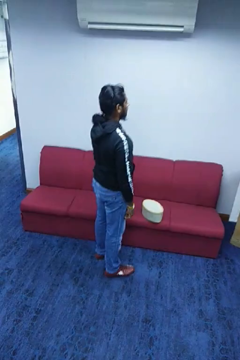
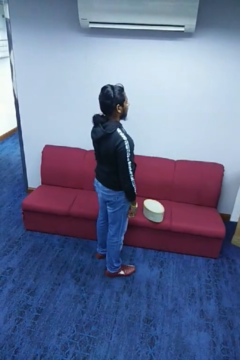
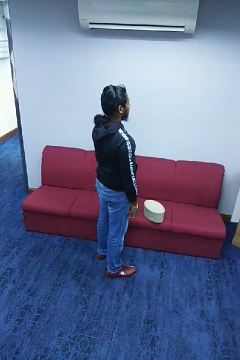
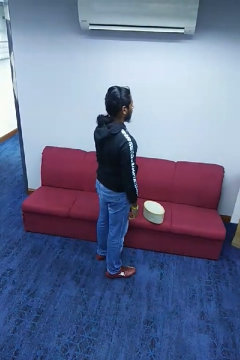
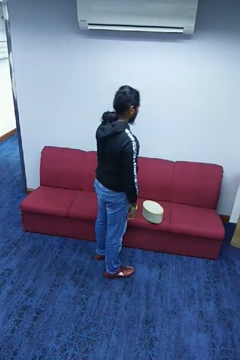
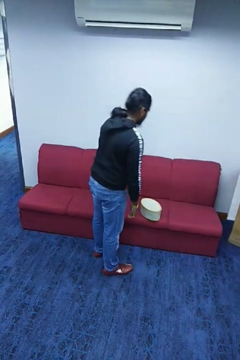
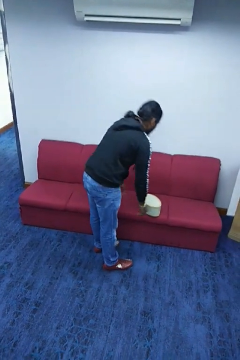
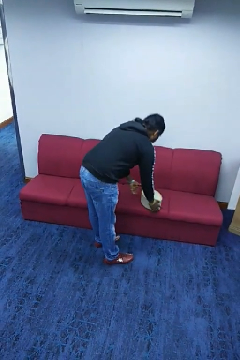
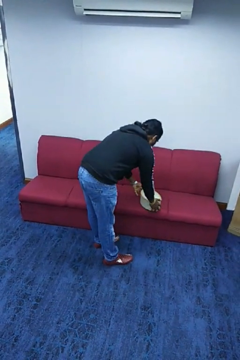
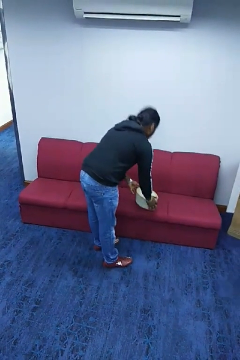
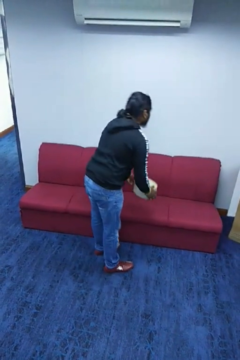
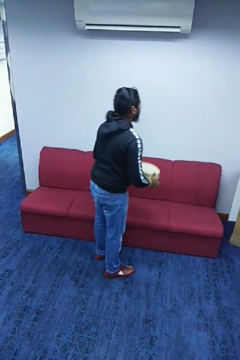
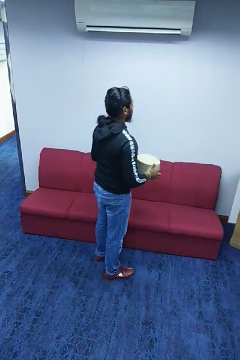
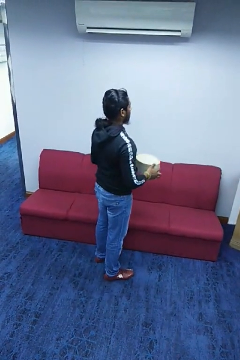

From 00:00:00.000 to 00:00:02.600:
person picks up object from couch

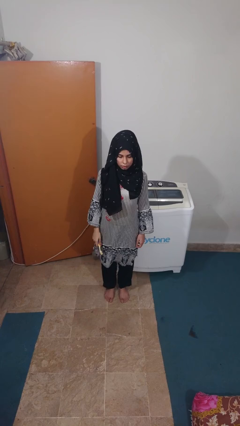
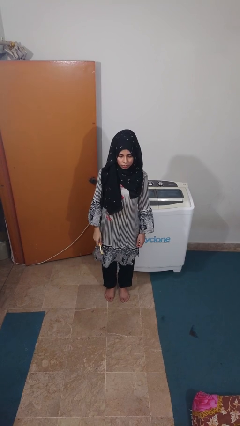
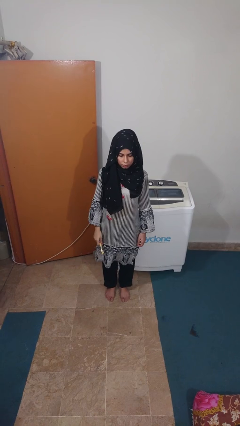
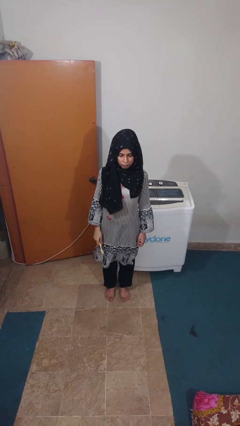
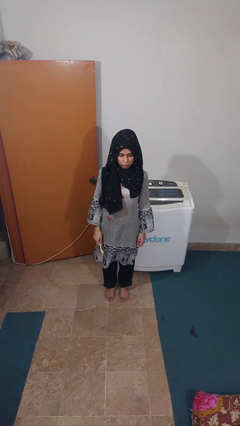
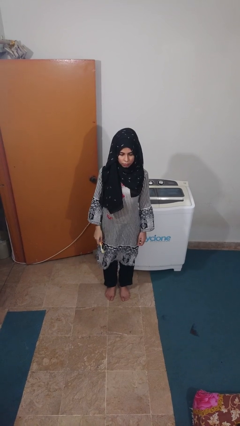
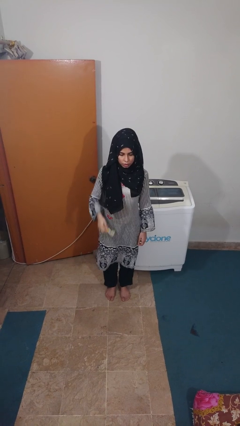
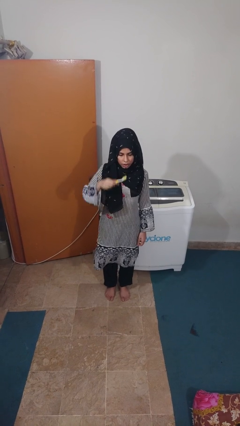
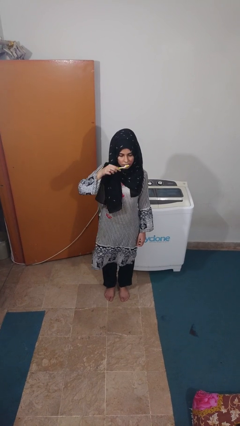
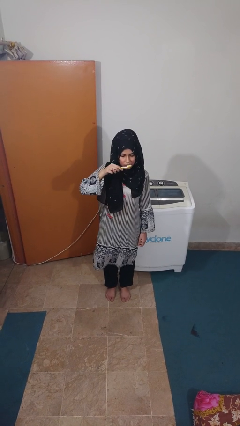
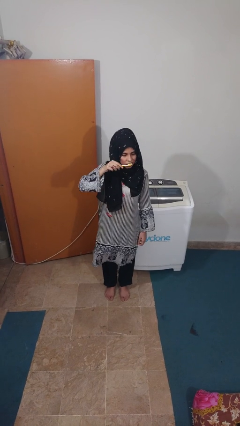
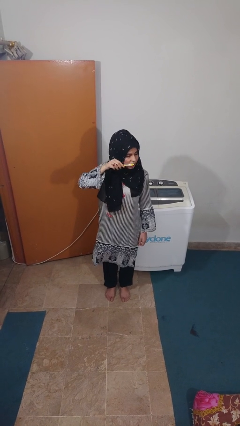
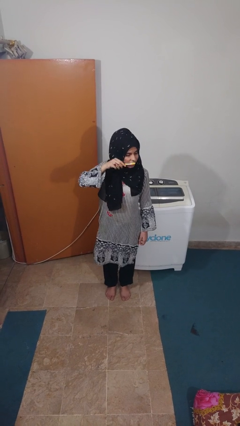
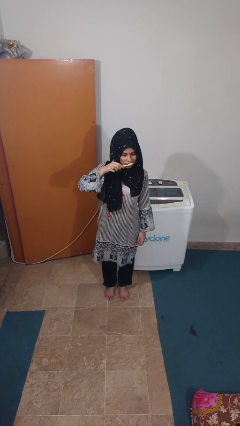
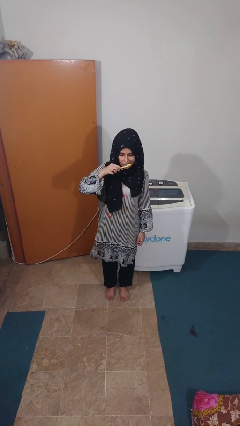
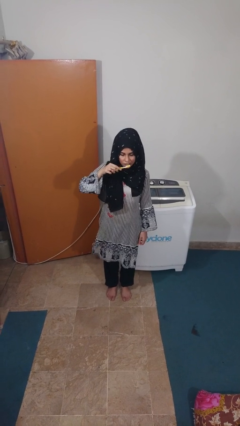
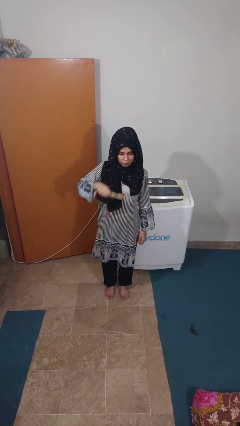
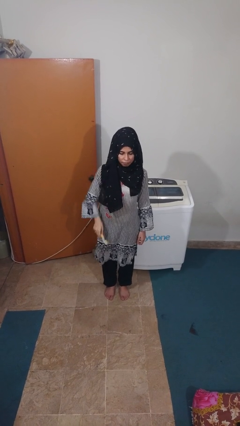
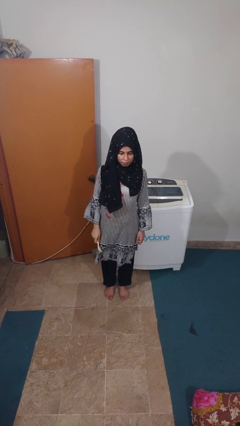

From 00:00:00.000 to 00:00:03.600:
person brushes teeth

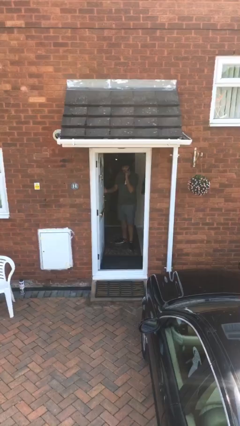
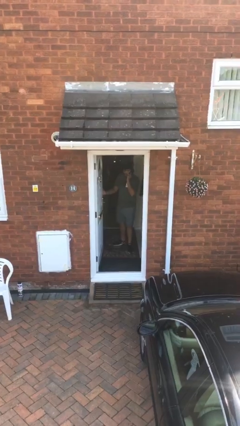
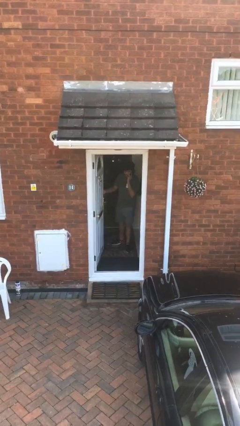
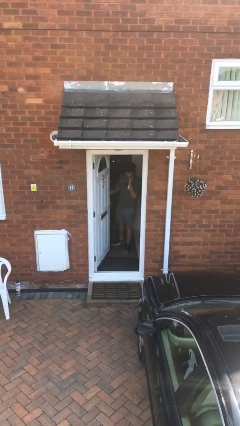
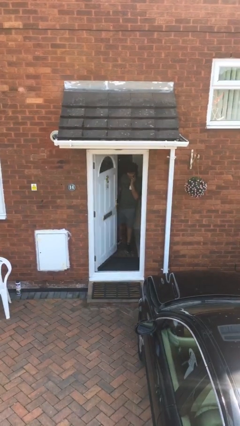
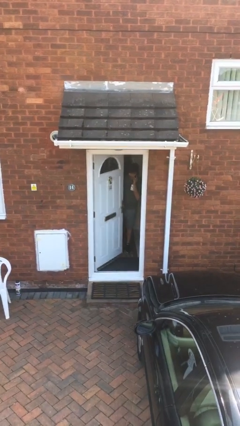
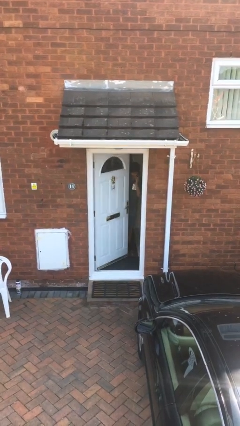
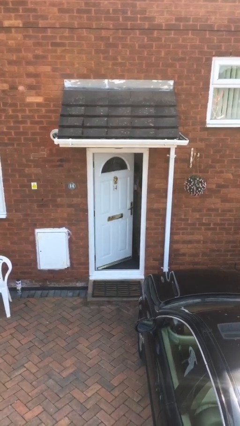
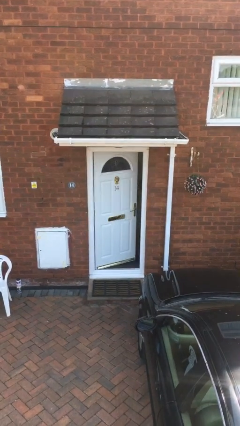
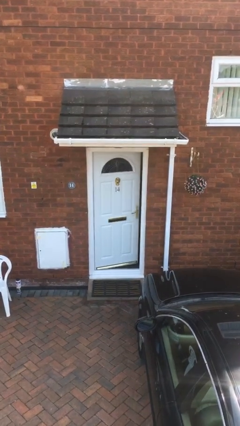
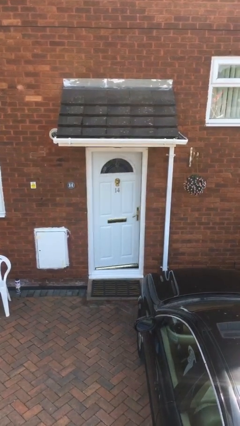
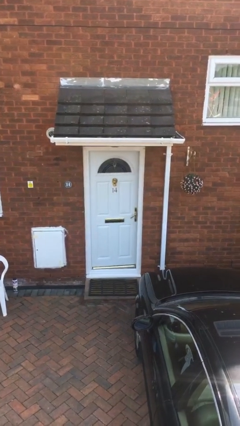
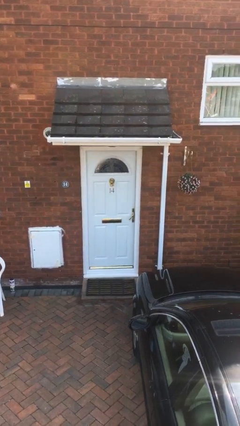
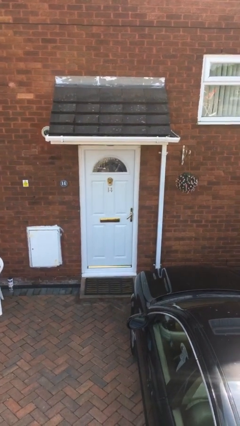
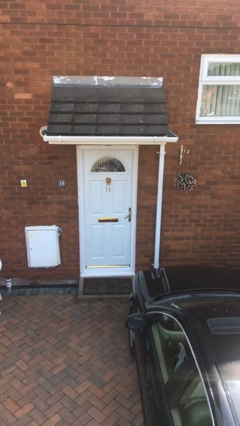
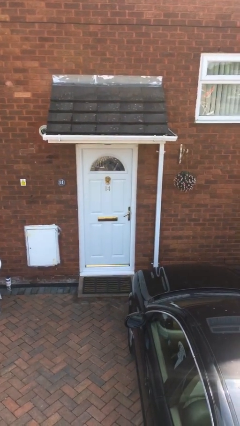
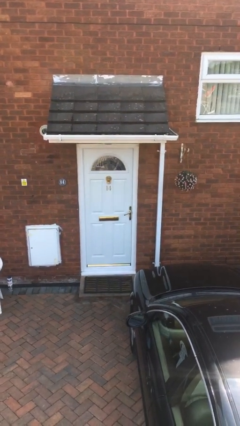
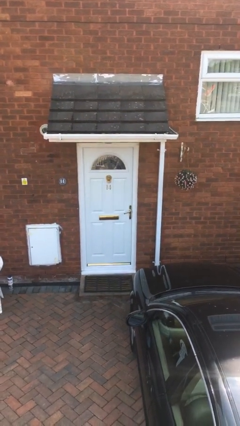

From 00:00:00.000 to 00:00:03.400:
person closes facility door

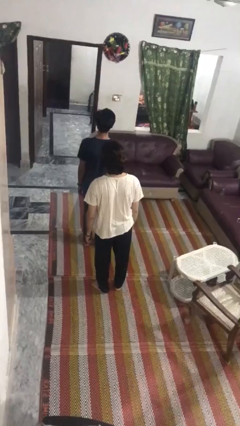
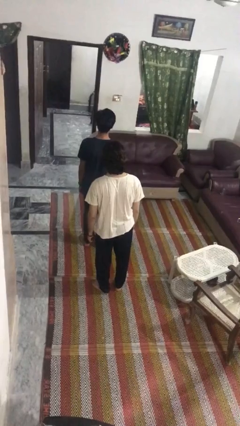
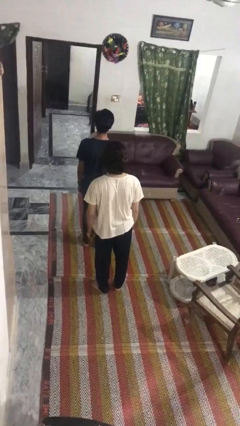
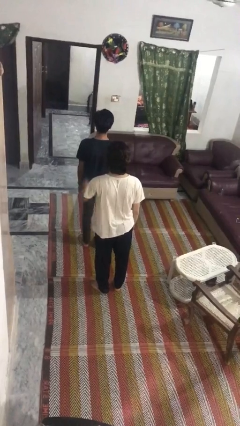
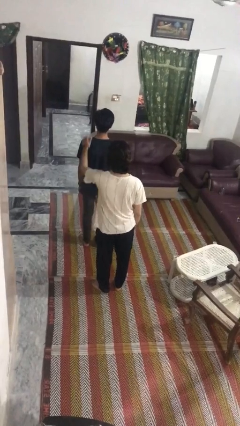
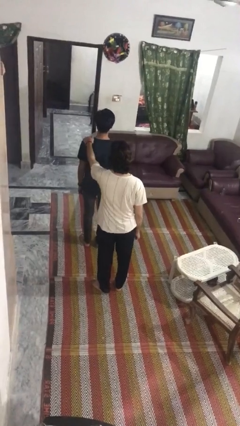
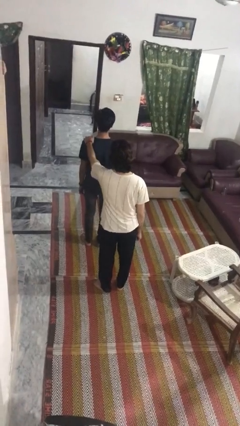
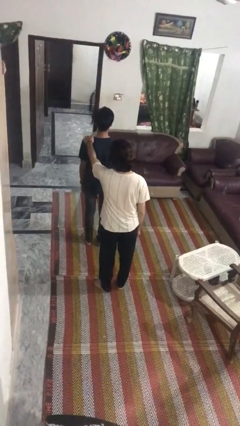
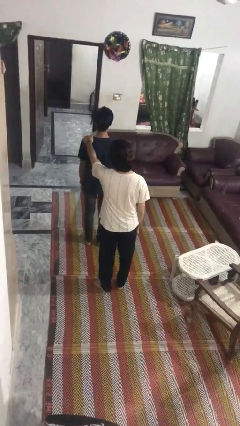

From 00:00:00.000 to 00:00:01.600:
person grabs person by shoulder

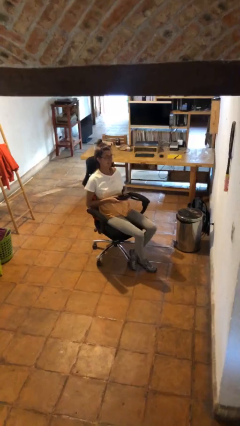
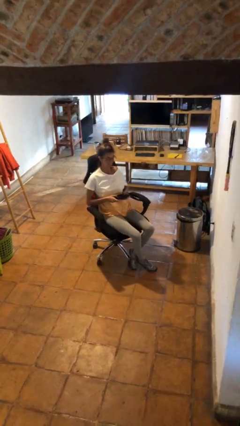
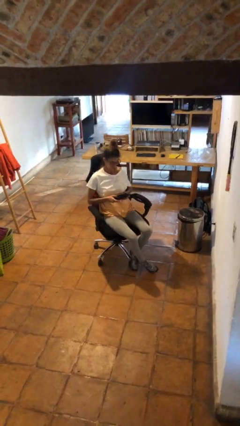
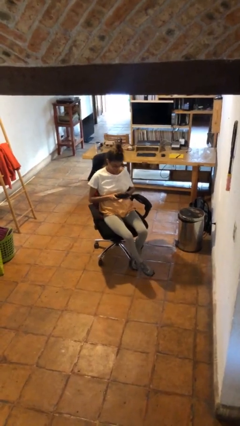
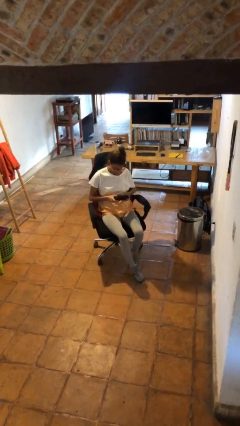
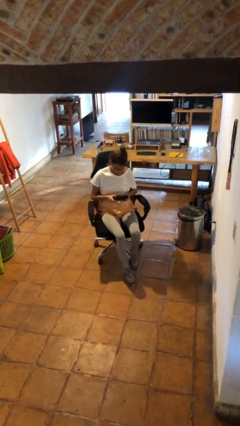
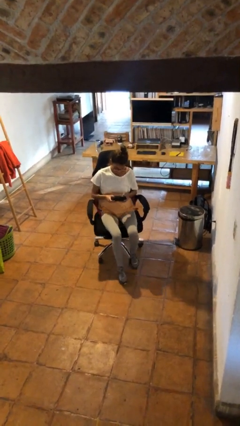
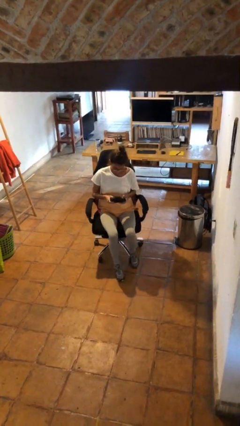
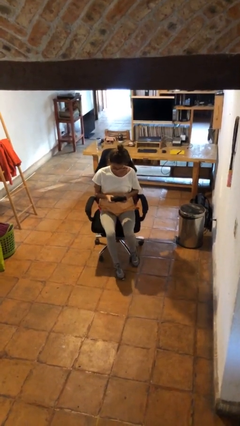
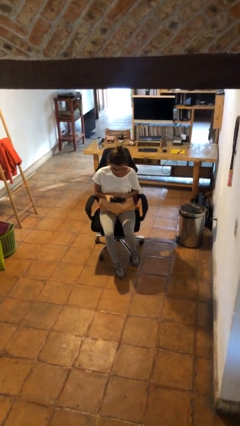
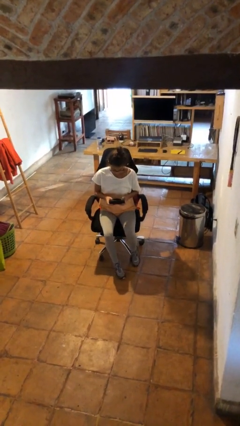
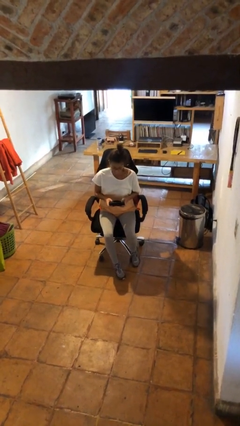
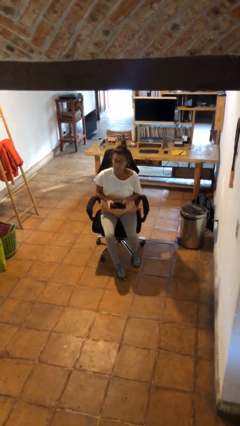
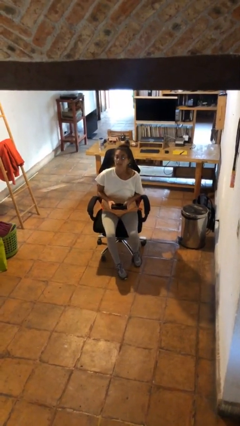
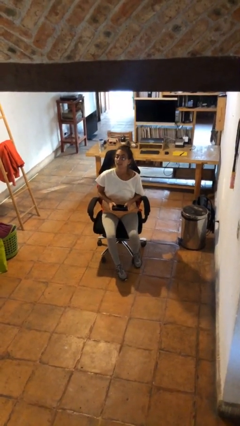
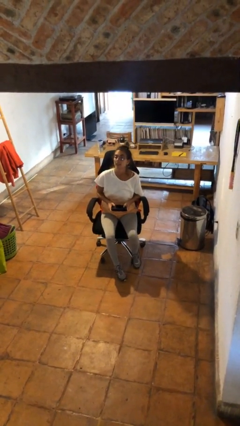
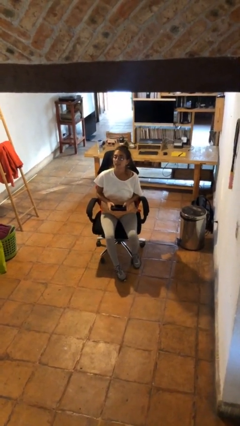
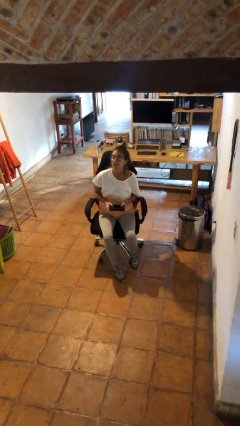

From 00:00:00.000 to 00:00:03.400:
person interacts with handheld game

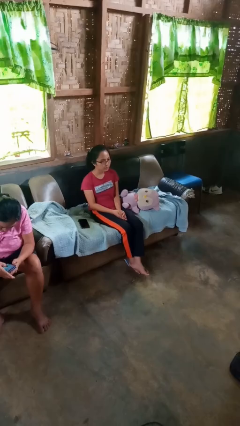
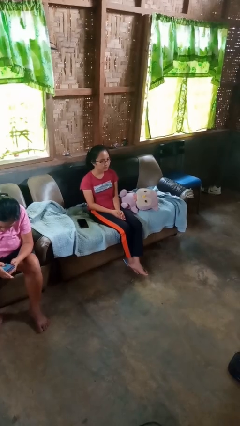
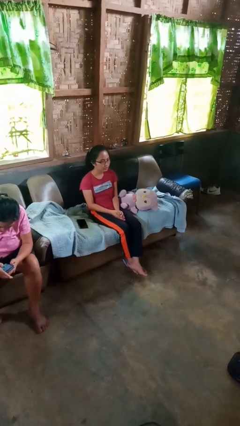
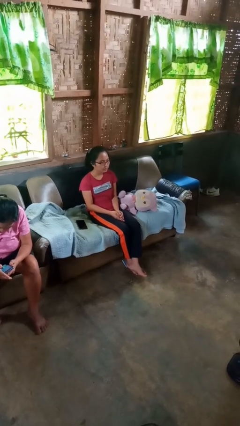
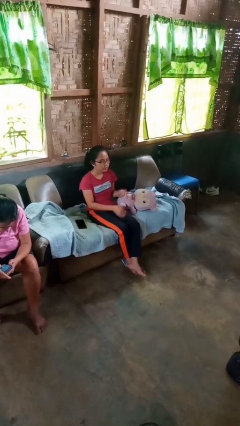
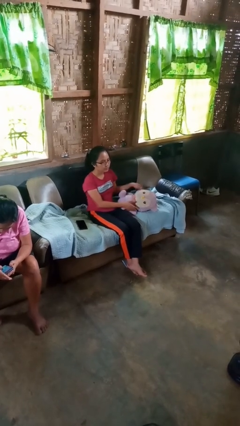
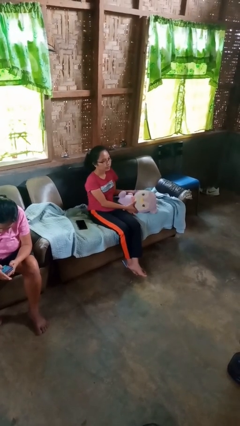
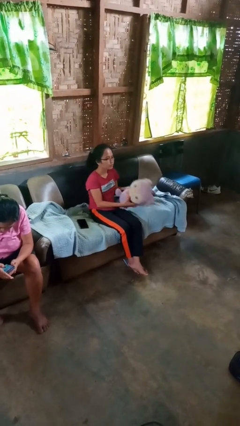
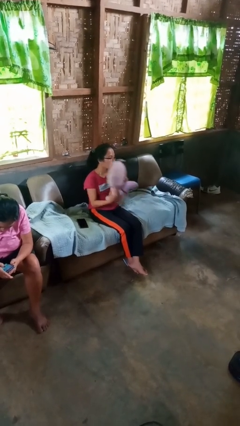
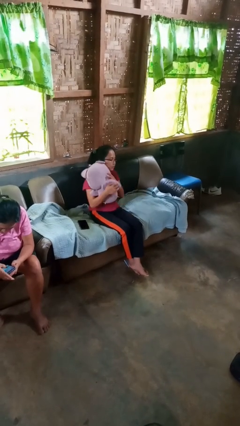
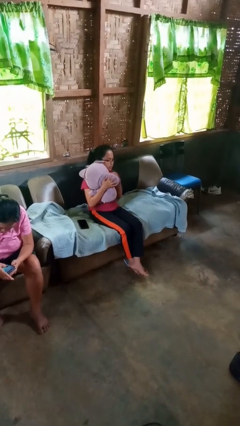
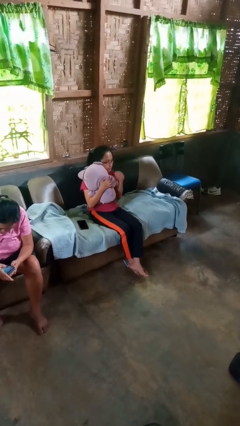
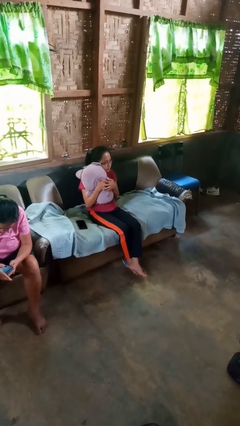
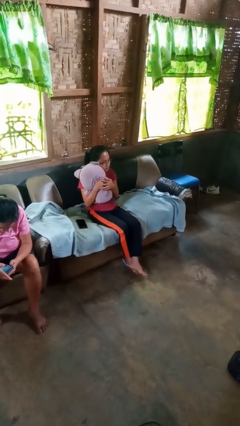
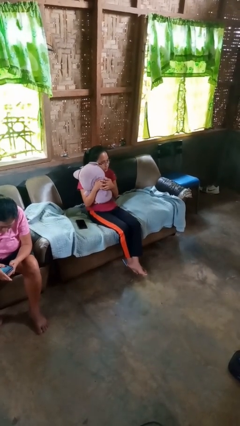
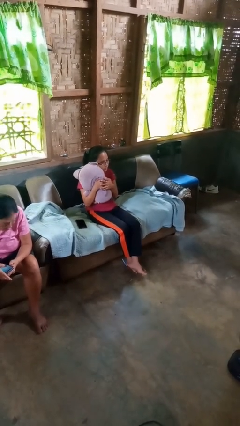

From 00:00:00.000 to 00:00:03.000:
person hugs stuffed animal

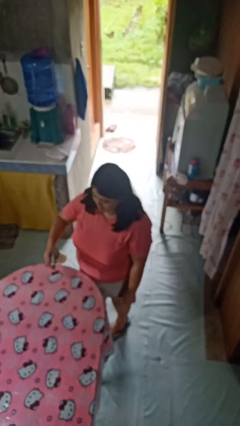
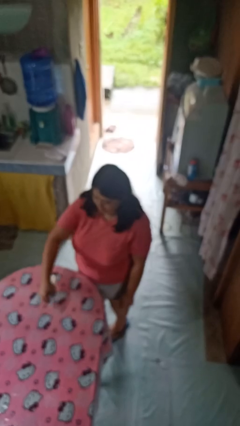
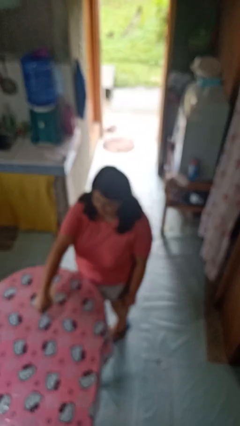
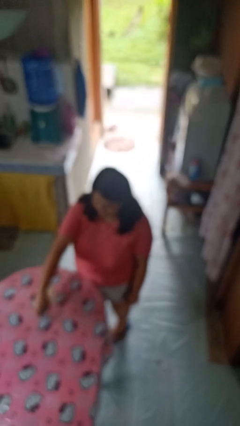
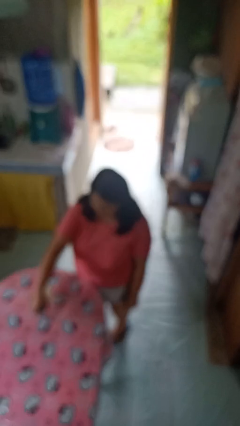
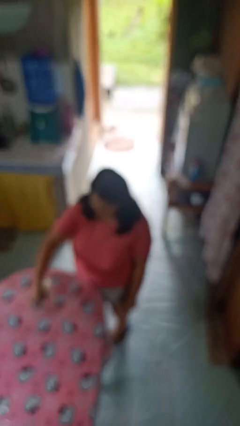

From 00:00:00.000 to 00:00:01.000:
person sprays from bottle
